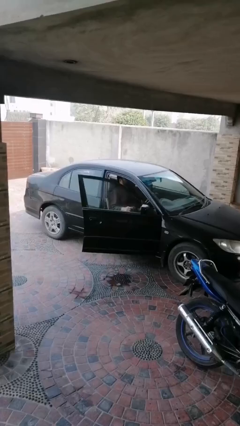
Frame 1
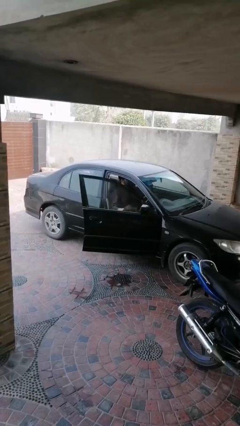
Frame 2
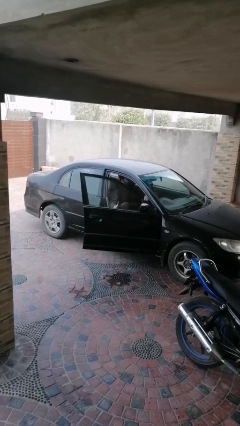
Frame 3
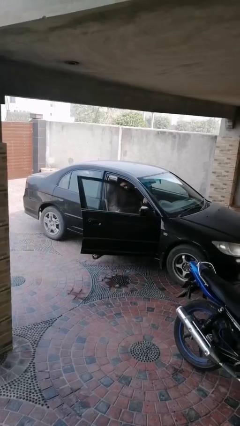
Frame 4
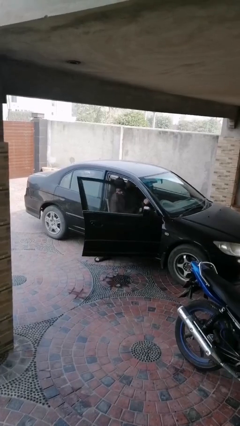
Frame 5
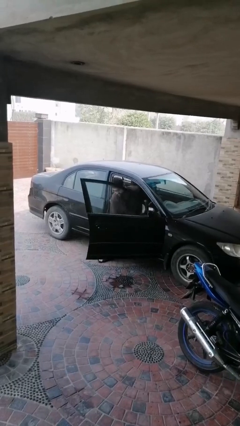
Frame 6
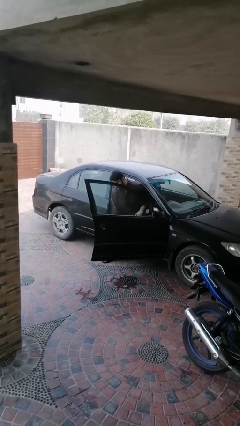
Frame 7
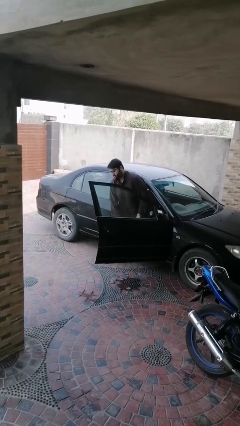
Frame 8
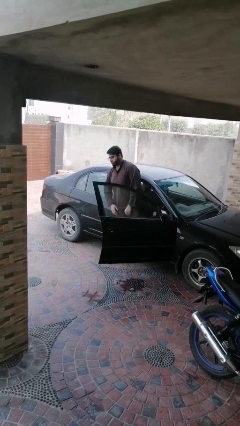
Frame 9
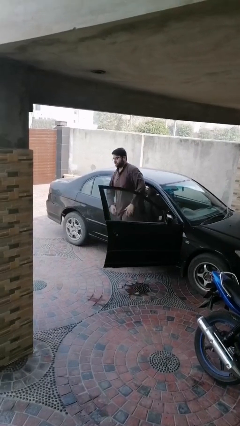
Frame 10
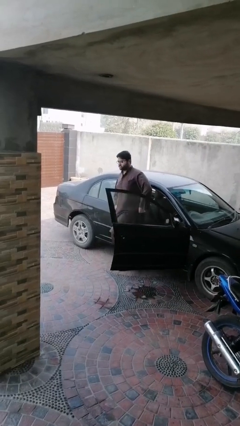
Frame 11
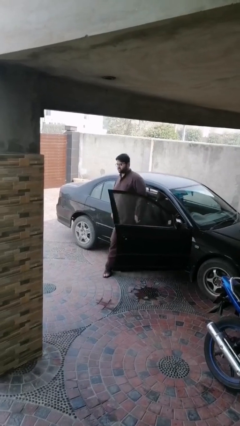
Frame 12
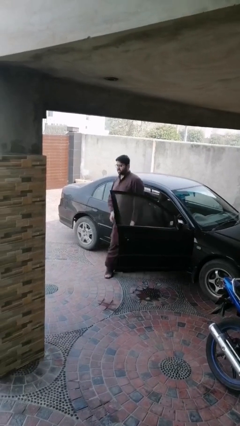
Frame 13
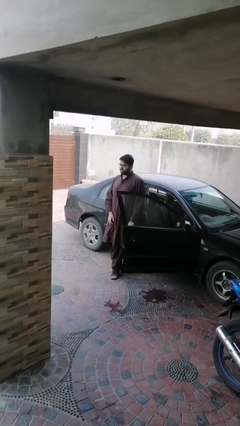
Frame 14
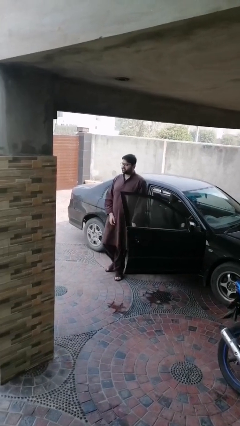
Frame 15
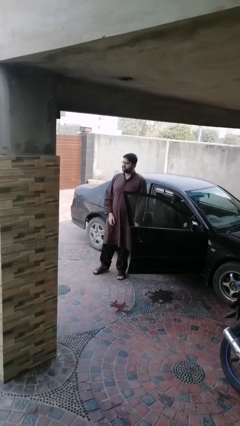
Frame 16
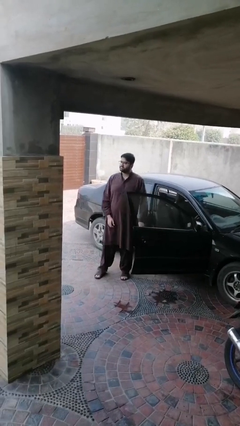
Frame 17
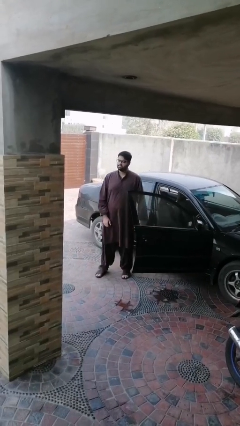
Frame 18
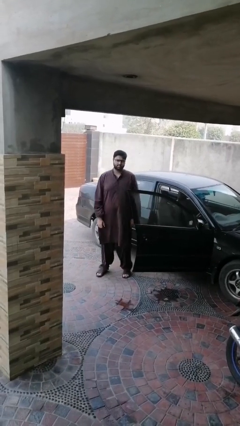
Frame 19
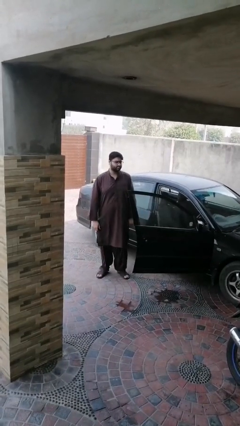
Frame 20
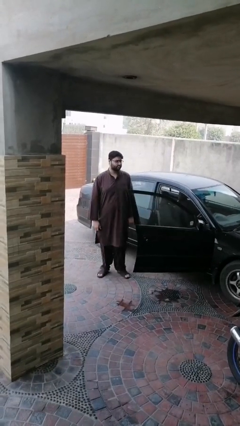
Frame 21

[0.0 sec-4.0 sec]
person exits car

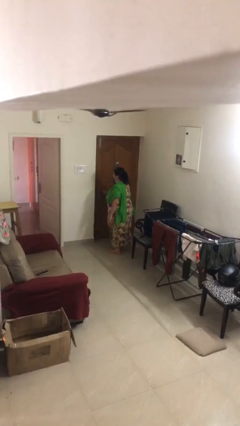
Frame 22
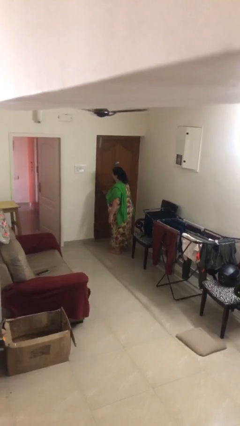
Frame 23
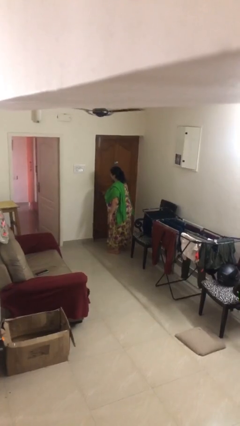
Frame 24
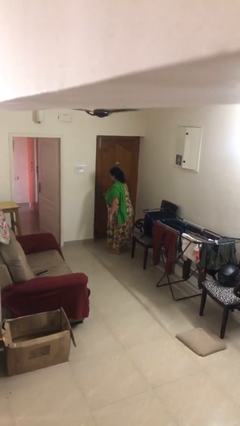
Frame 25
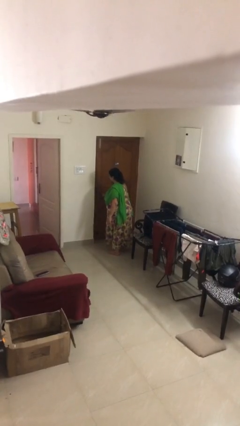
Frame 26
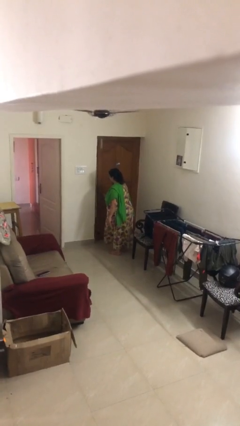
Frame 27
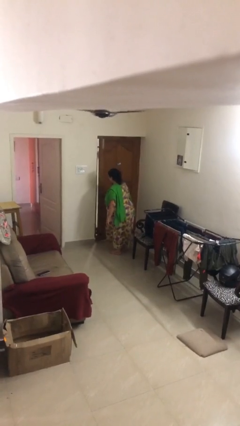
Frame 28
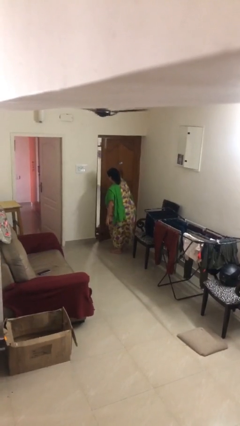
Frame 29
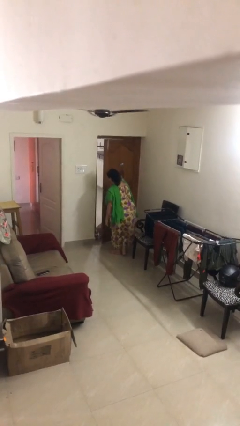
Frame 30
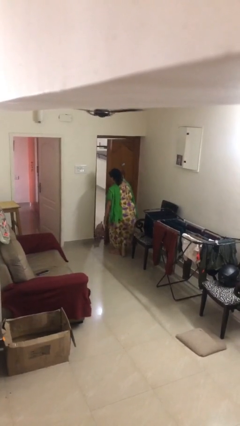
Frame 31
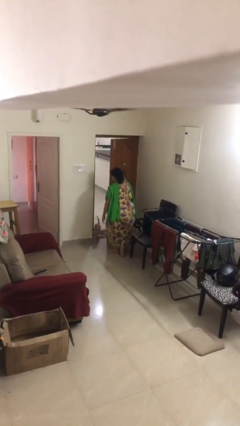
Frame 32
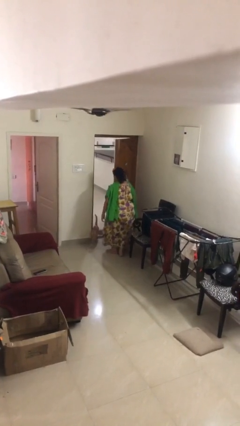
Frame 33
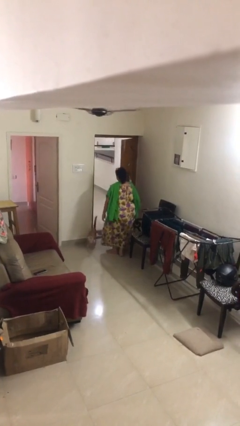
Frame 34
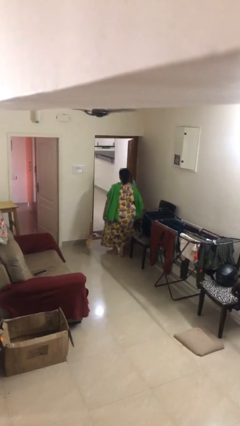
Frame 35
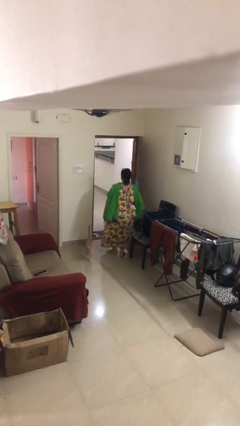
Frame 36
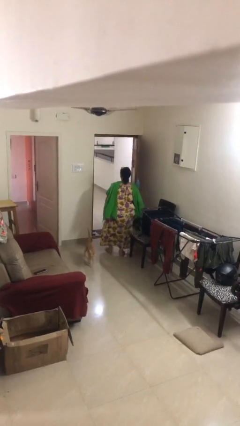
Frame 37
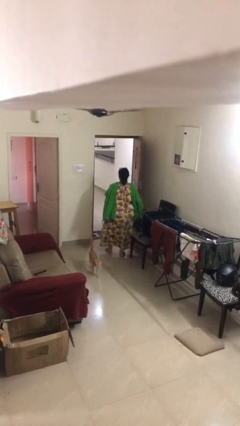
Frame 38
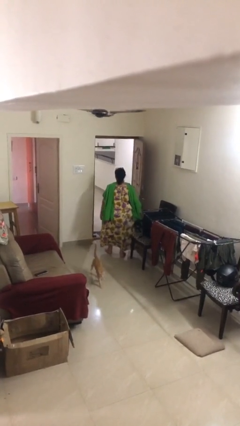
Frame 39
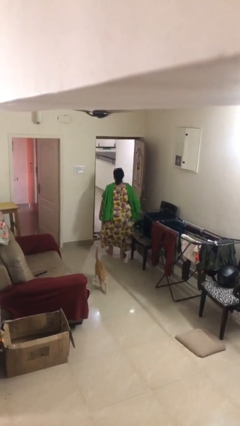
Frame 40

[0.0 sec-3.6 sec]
person opens facility door

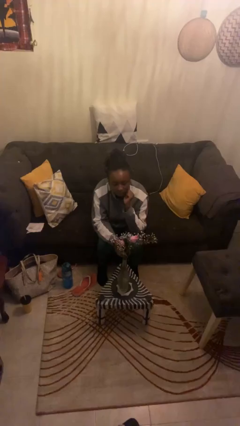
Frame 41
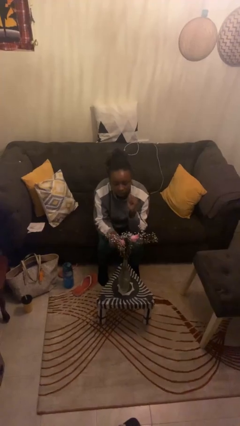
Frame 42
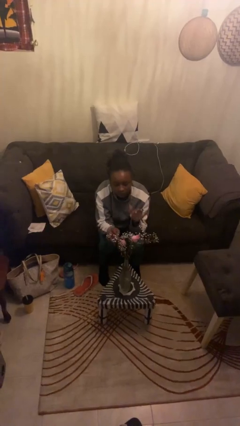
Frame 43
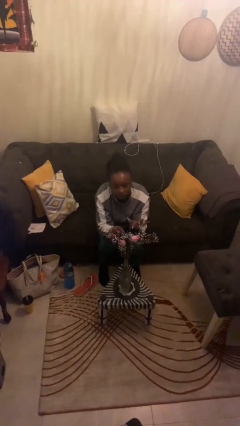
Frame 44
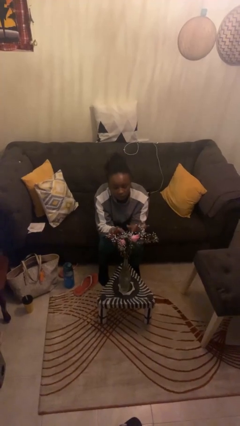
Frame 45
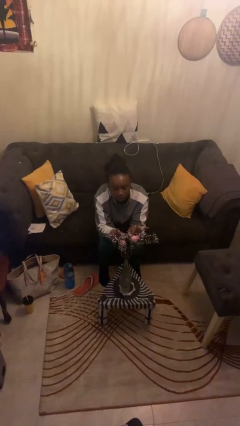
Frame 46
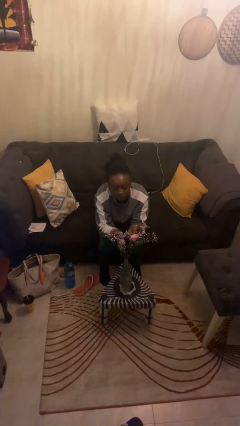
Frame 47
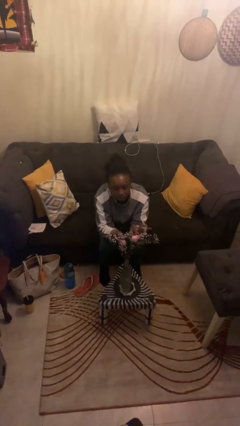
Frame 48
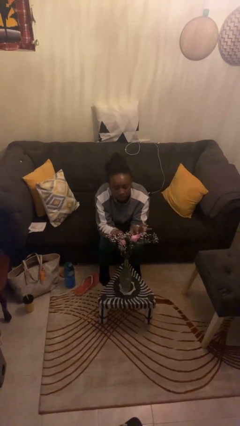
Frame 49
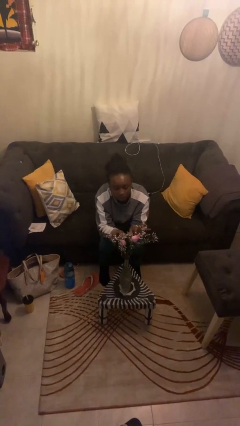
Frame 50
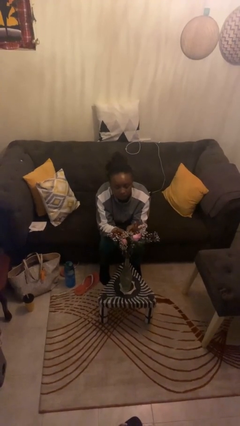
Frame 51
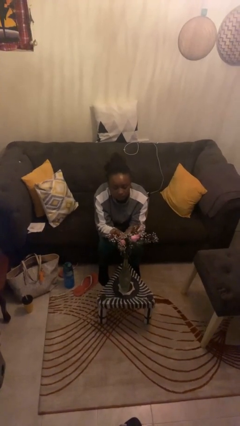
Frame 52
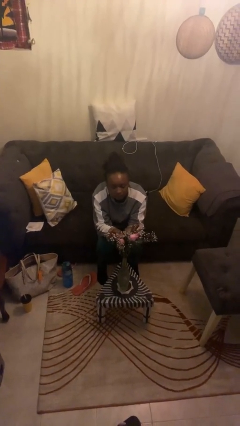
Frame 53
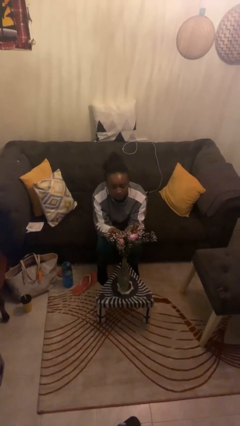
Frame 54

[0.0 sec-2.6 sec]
person arranges flowers in vase

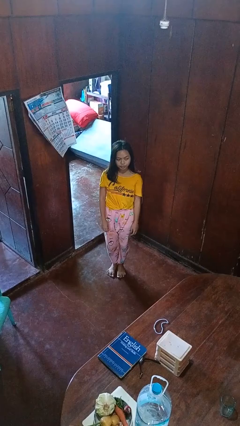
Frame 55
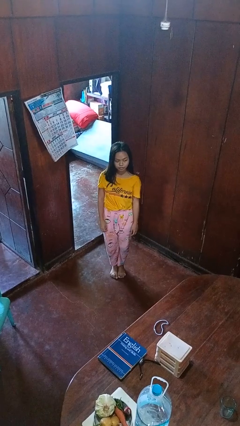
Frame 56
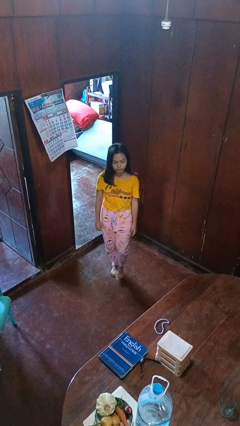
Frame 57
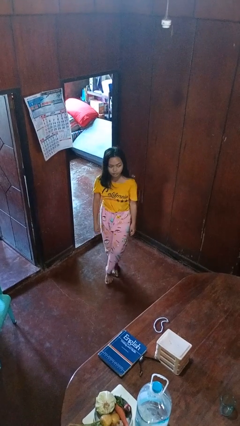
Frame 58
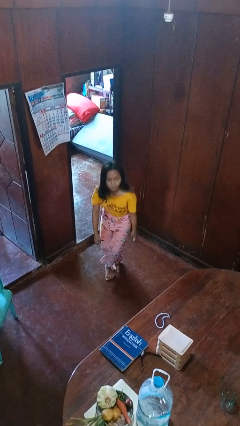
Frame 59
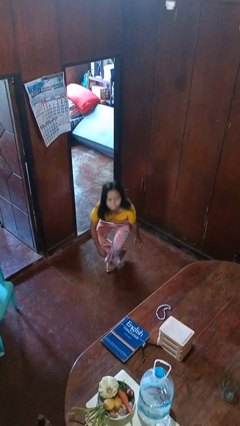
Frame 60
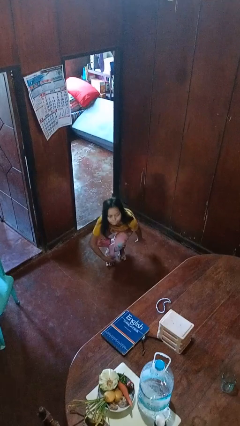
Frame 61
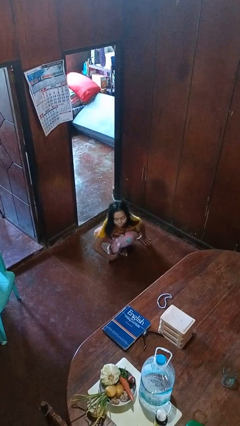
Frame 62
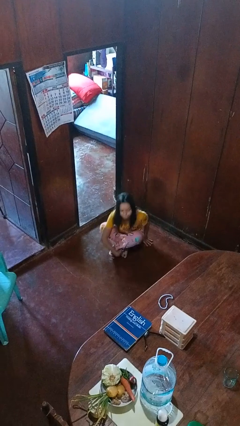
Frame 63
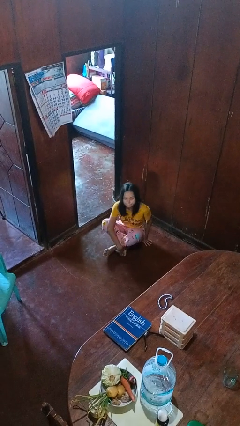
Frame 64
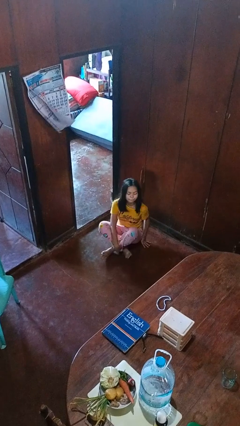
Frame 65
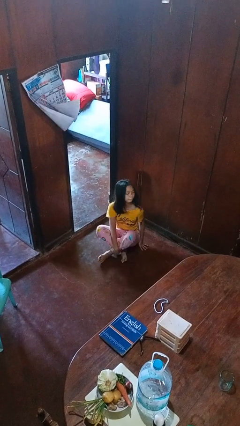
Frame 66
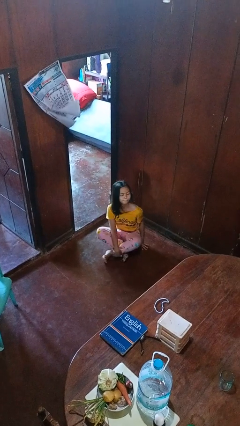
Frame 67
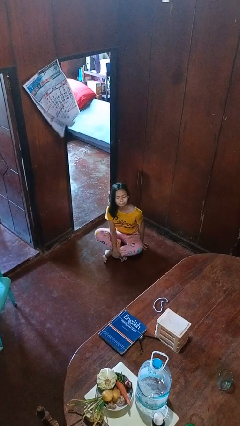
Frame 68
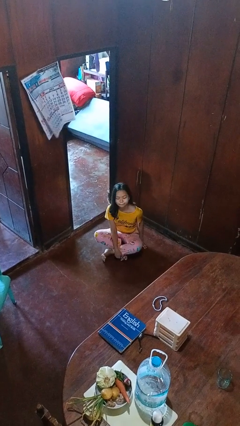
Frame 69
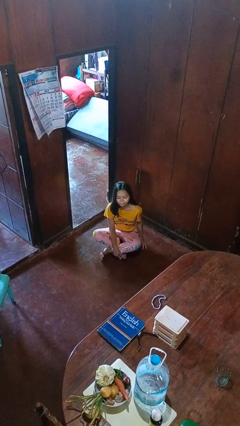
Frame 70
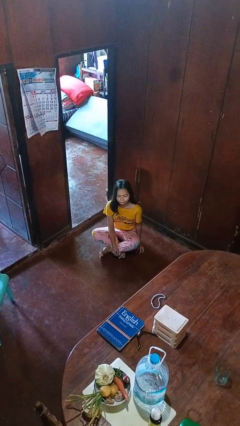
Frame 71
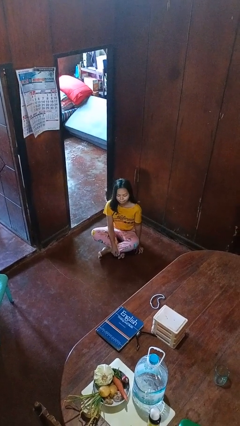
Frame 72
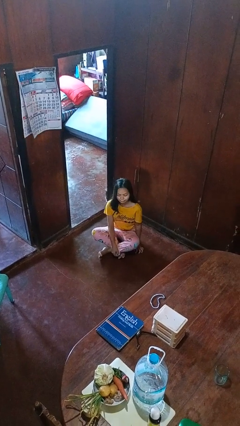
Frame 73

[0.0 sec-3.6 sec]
person sits crisscross

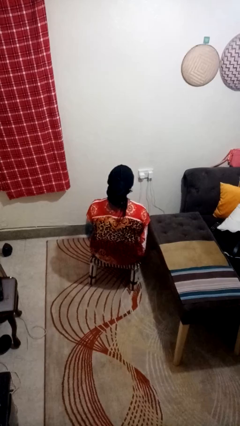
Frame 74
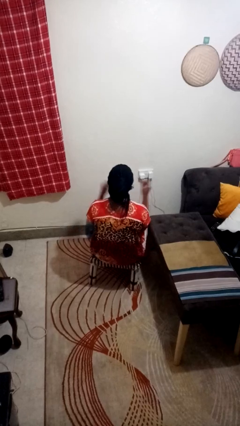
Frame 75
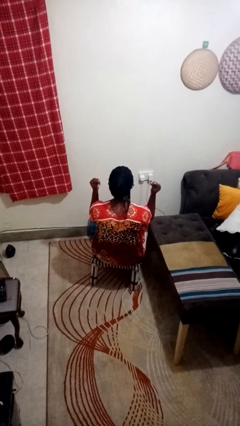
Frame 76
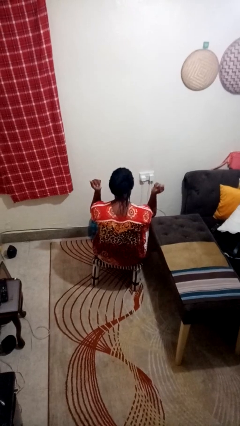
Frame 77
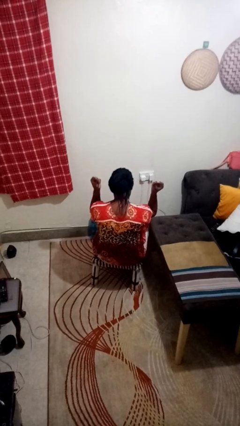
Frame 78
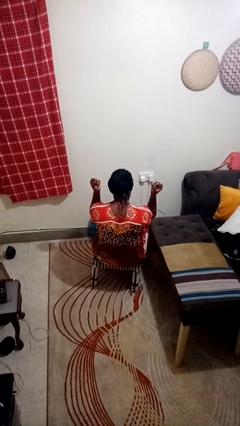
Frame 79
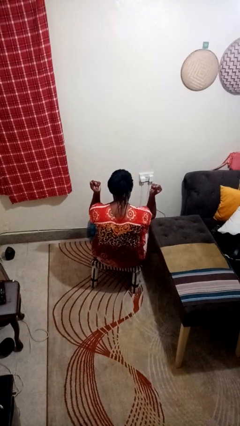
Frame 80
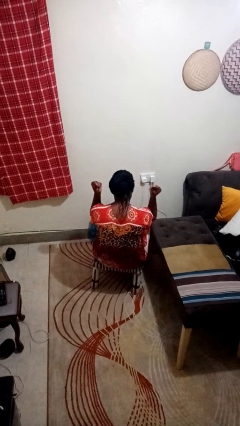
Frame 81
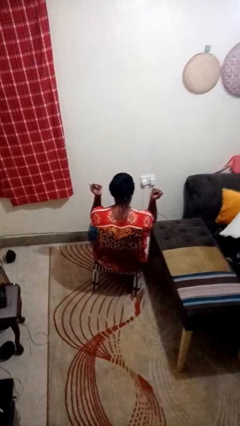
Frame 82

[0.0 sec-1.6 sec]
person snaps fingers

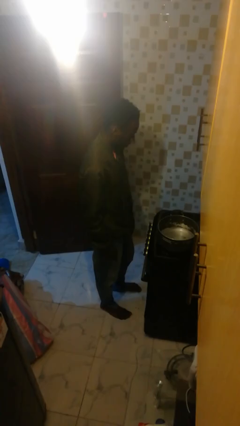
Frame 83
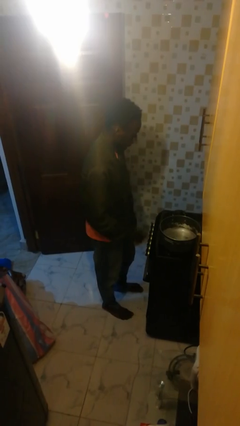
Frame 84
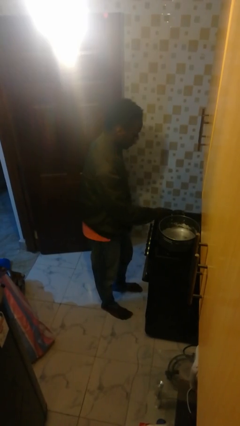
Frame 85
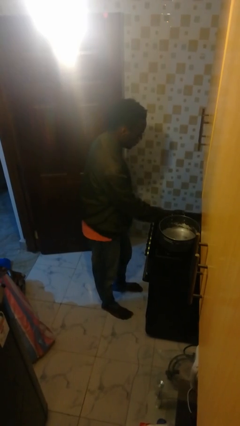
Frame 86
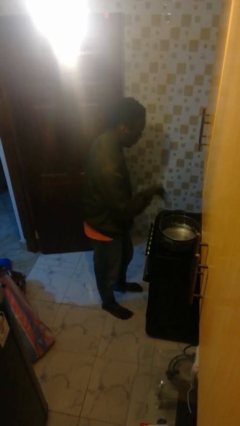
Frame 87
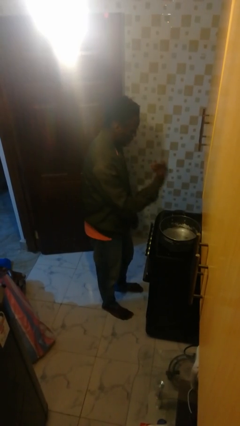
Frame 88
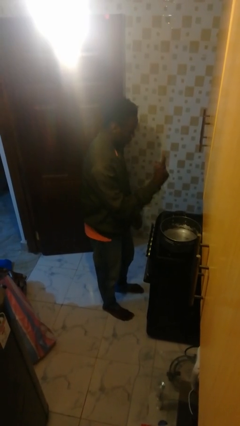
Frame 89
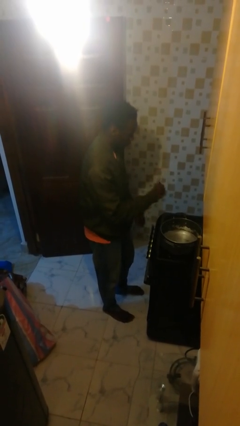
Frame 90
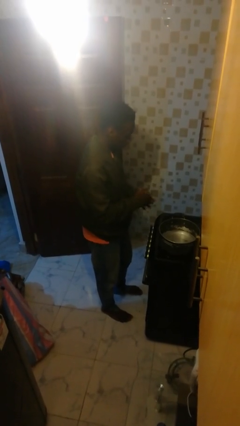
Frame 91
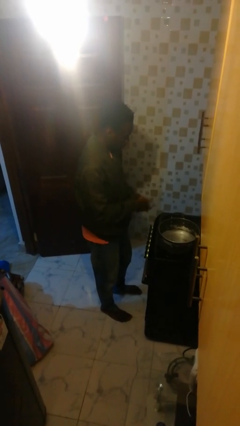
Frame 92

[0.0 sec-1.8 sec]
person burns hand

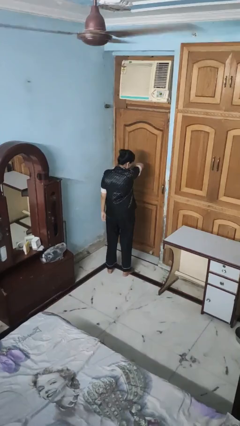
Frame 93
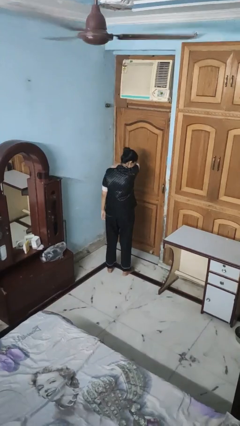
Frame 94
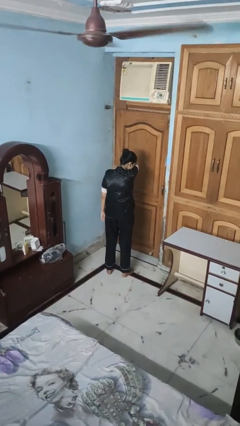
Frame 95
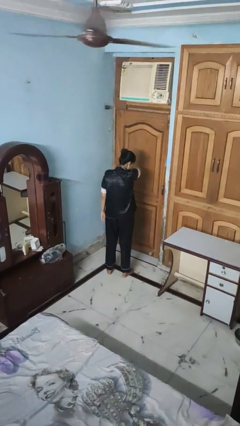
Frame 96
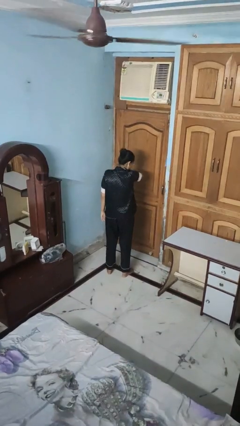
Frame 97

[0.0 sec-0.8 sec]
person sneezes into arm
